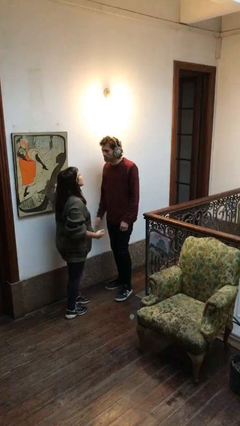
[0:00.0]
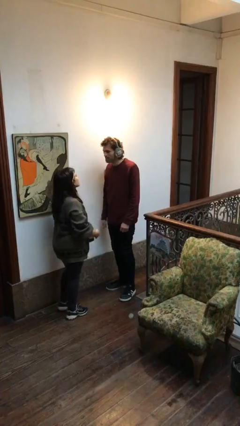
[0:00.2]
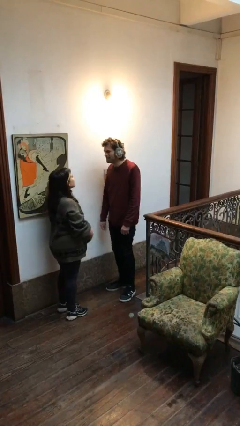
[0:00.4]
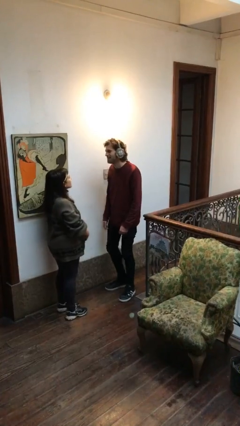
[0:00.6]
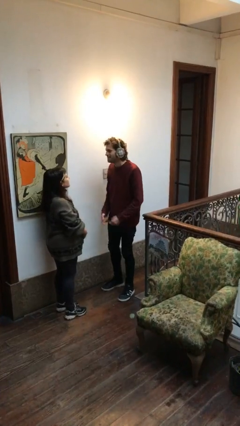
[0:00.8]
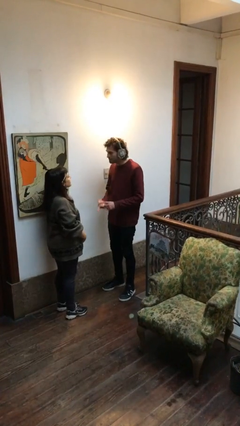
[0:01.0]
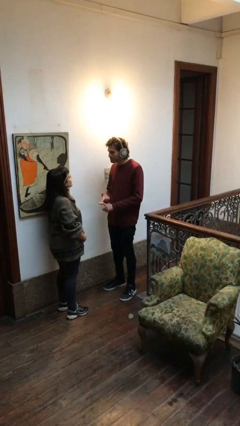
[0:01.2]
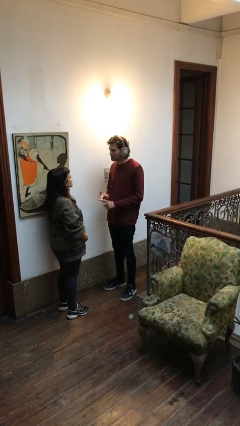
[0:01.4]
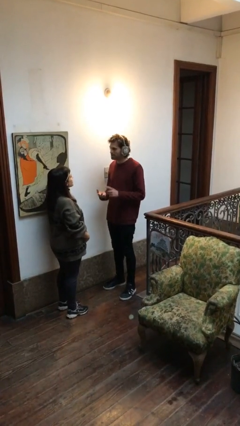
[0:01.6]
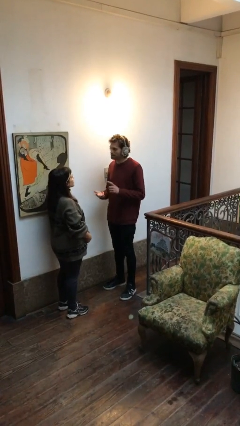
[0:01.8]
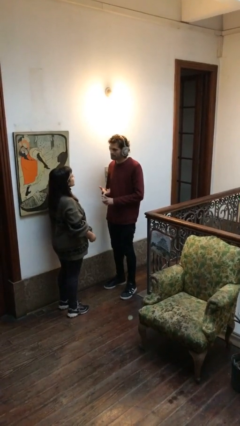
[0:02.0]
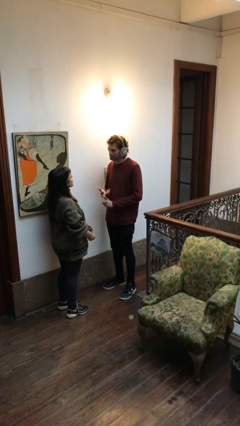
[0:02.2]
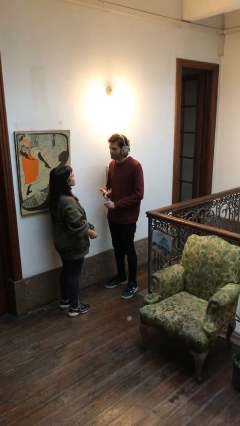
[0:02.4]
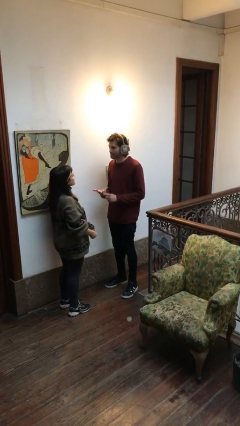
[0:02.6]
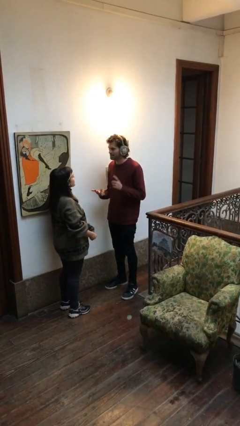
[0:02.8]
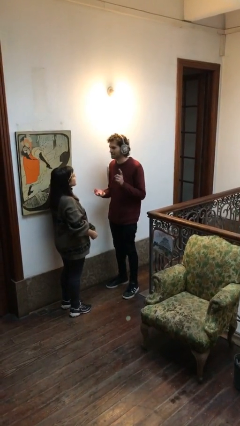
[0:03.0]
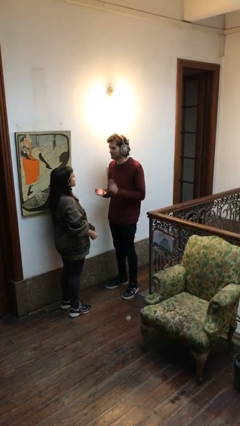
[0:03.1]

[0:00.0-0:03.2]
person talks to person

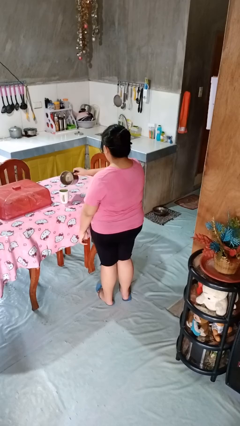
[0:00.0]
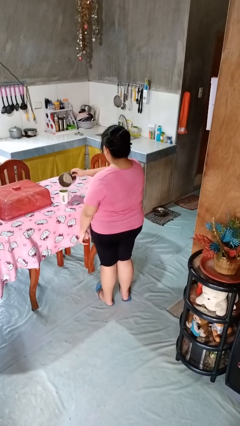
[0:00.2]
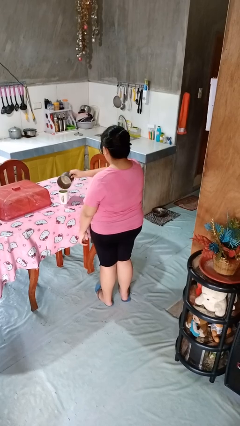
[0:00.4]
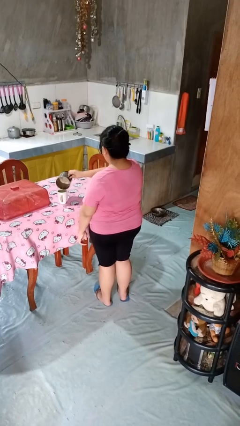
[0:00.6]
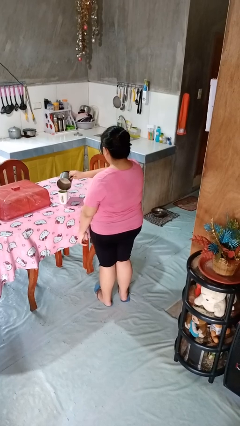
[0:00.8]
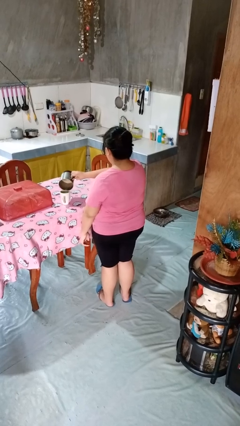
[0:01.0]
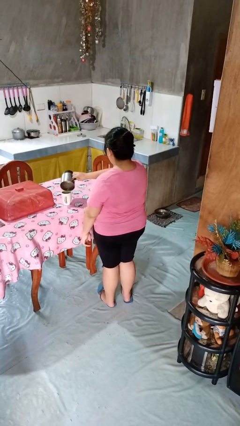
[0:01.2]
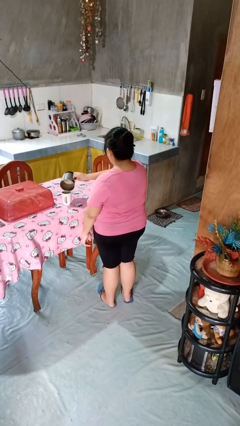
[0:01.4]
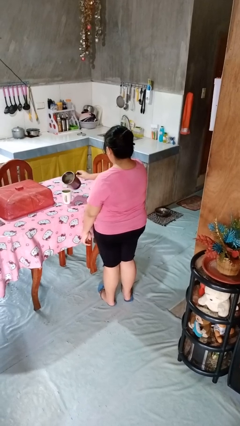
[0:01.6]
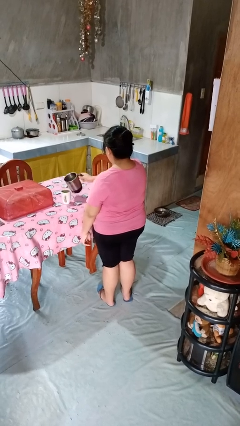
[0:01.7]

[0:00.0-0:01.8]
person pours coffee into mug

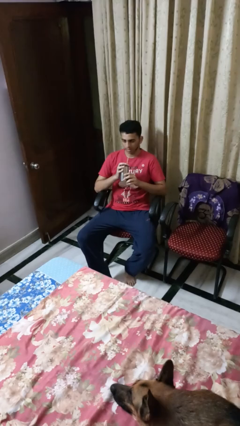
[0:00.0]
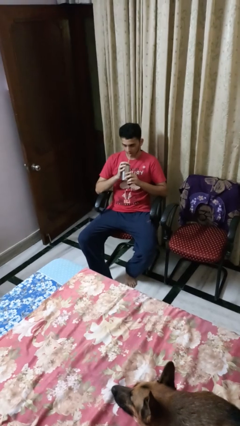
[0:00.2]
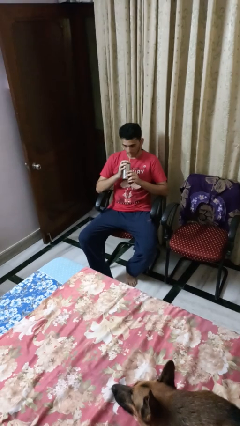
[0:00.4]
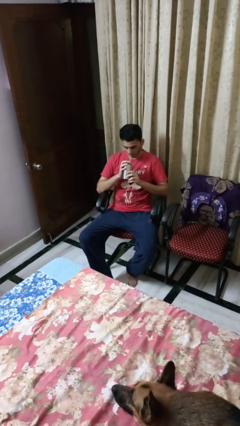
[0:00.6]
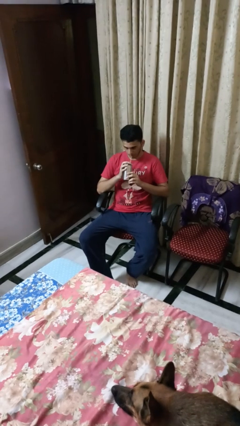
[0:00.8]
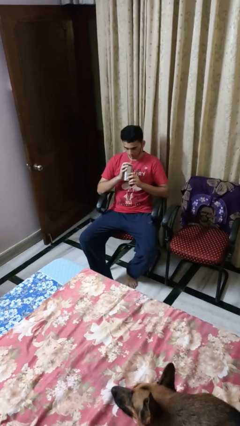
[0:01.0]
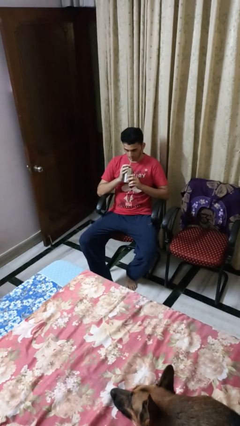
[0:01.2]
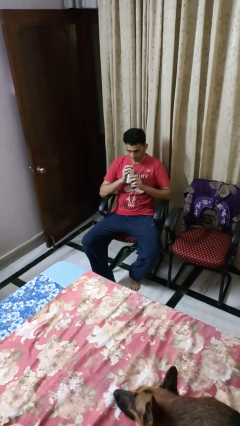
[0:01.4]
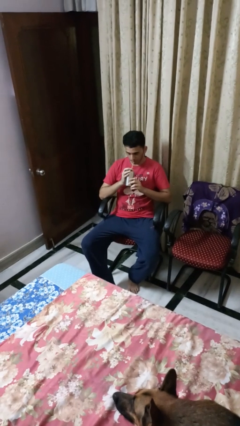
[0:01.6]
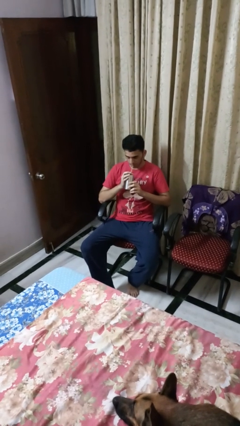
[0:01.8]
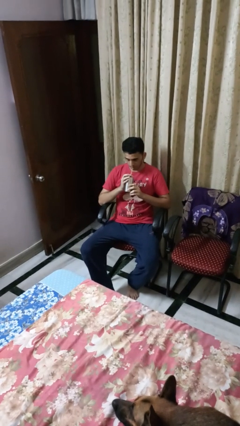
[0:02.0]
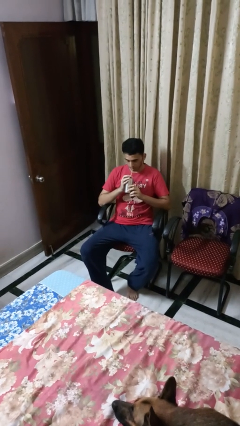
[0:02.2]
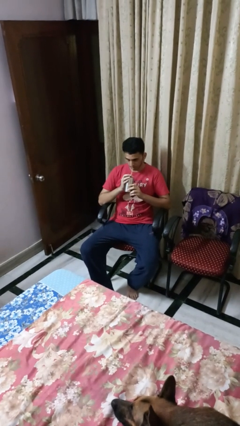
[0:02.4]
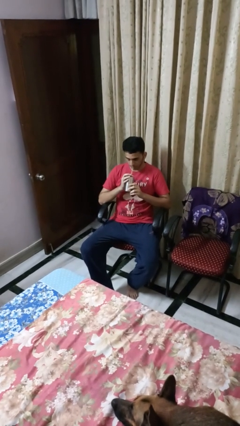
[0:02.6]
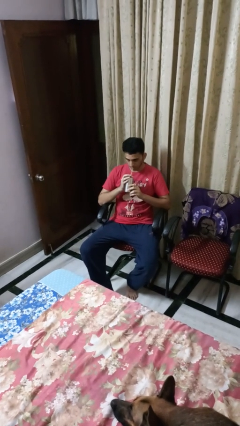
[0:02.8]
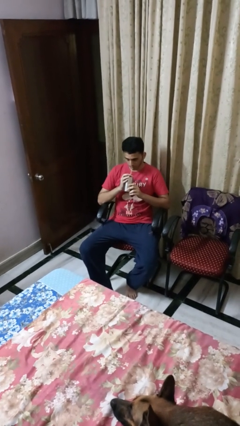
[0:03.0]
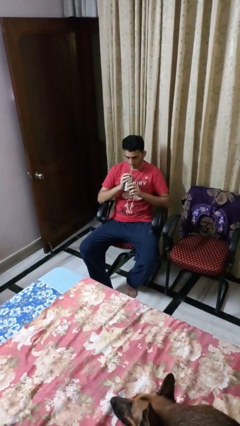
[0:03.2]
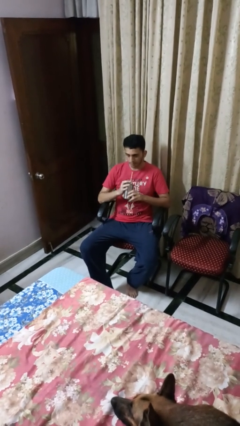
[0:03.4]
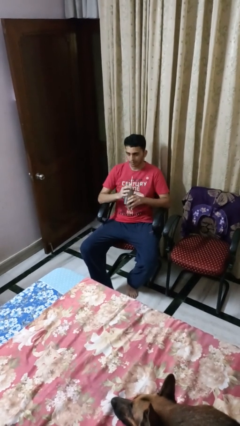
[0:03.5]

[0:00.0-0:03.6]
person drinks from straw

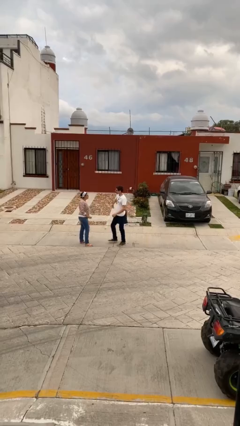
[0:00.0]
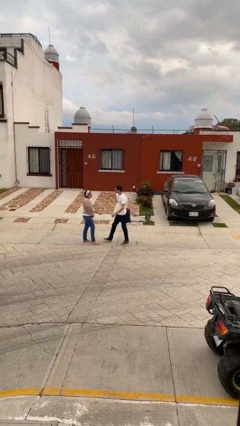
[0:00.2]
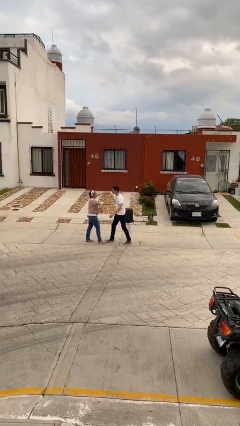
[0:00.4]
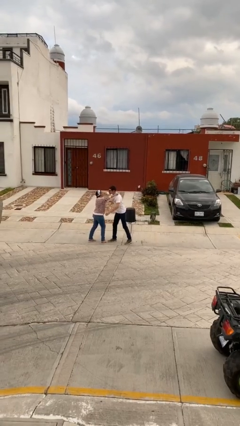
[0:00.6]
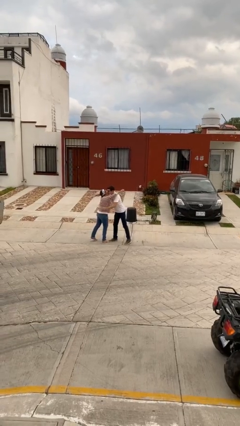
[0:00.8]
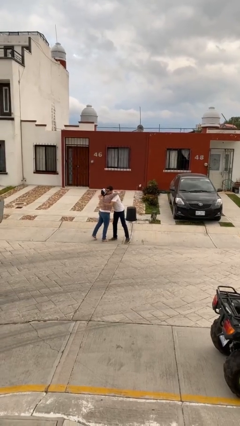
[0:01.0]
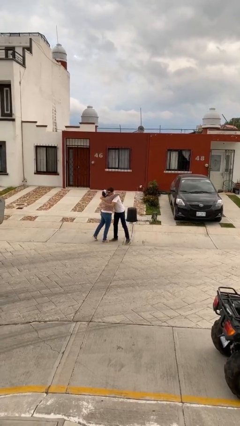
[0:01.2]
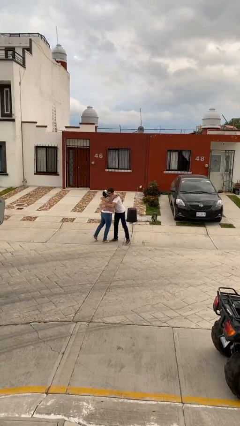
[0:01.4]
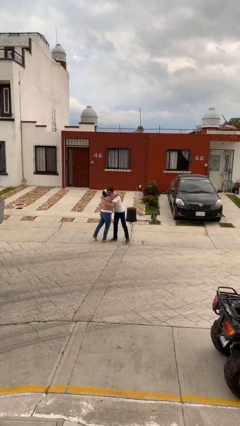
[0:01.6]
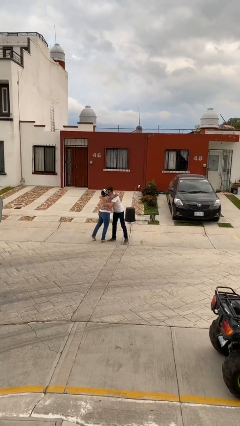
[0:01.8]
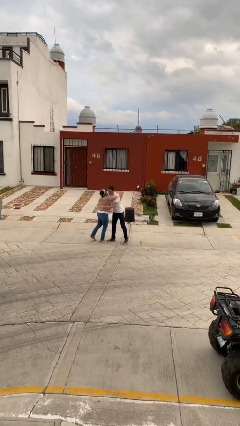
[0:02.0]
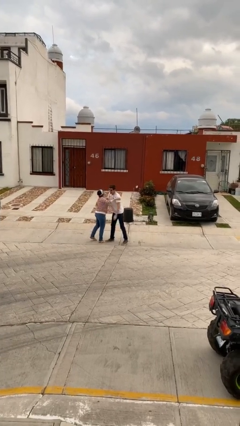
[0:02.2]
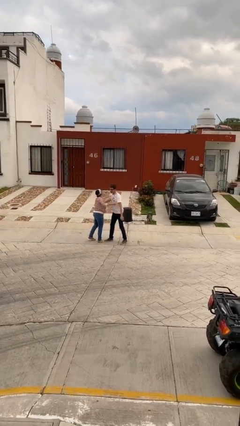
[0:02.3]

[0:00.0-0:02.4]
person embraces person

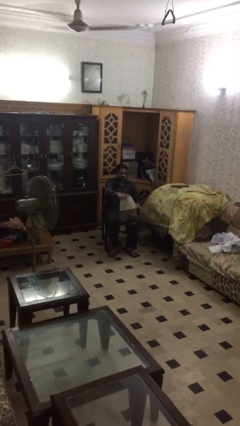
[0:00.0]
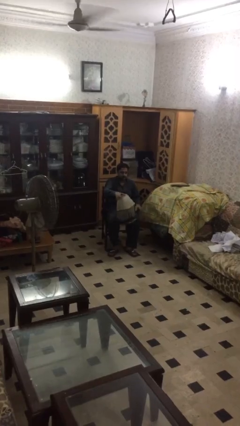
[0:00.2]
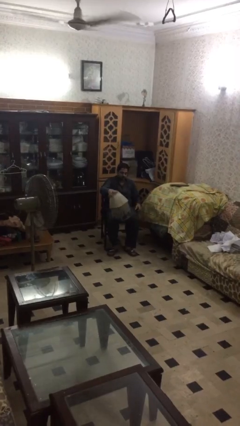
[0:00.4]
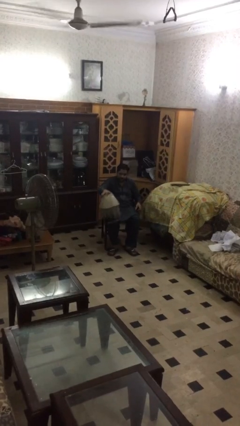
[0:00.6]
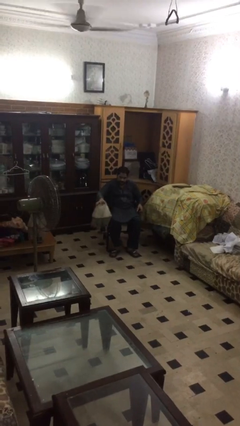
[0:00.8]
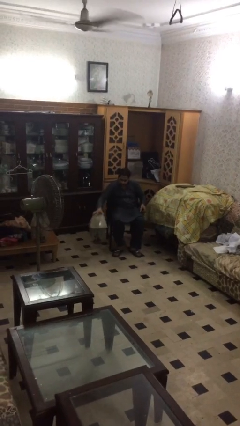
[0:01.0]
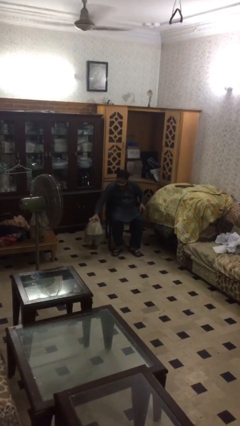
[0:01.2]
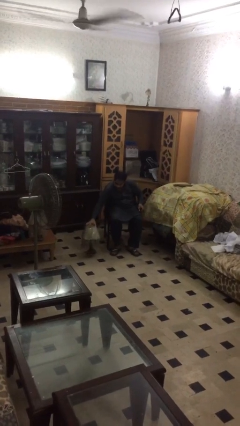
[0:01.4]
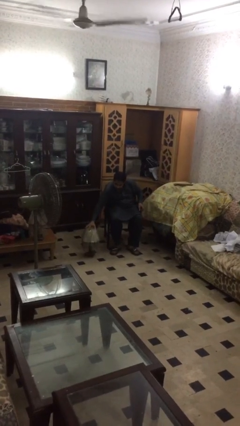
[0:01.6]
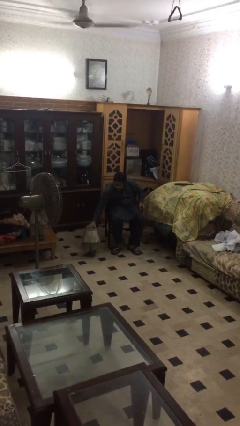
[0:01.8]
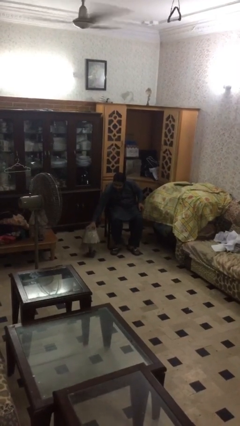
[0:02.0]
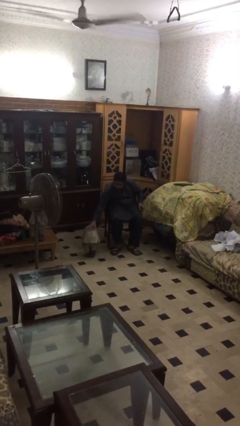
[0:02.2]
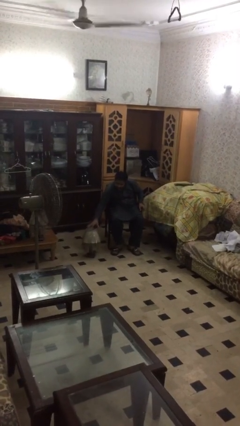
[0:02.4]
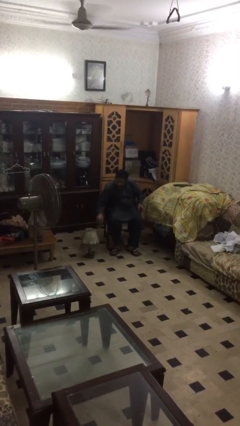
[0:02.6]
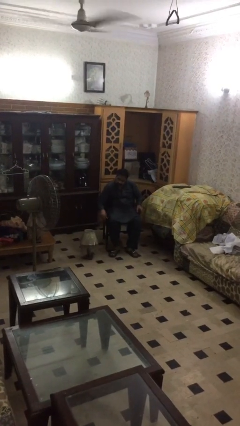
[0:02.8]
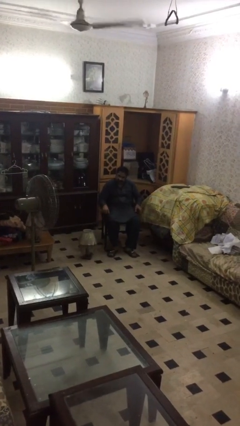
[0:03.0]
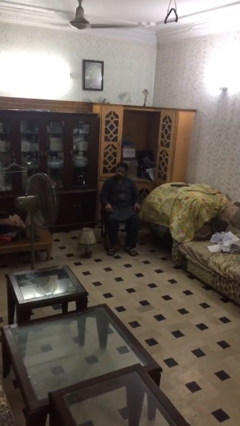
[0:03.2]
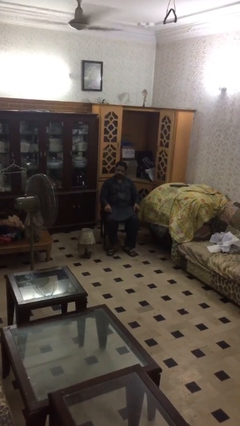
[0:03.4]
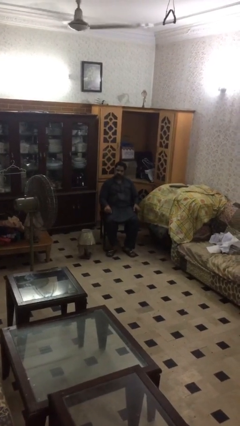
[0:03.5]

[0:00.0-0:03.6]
person puts down object on floor

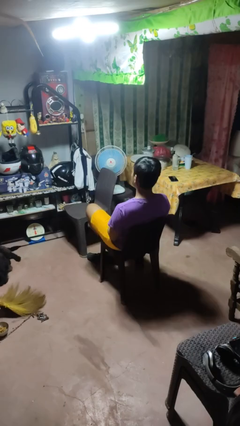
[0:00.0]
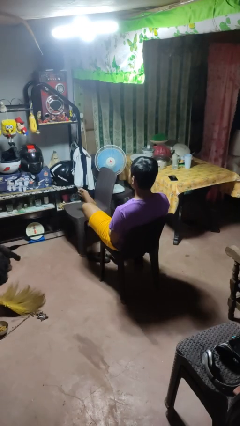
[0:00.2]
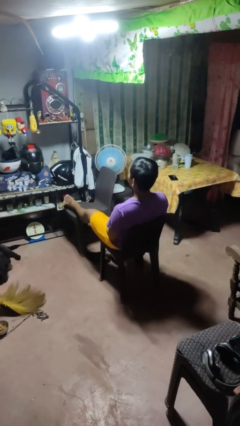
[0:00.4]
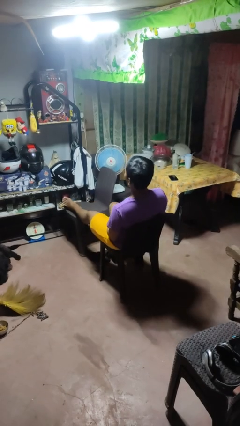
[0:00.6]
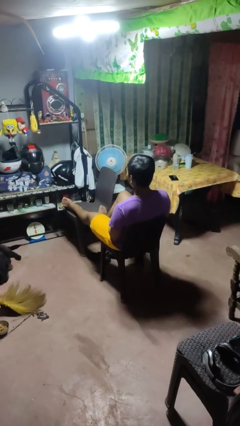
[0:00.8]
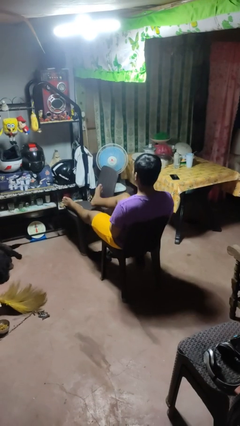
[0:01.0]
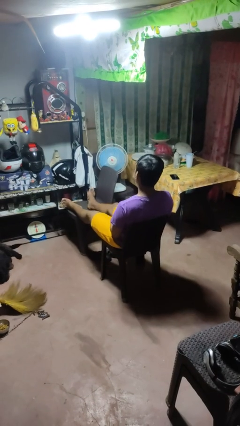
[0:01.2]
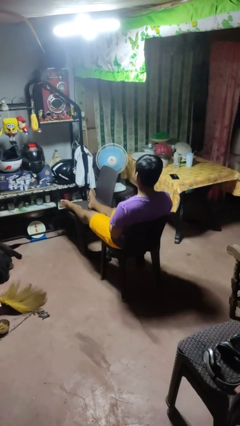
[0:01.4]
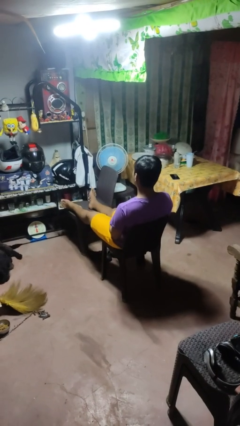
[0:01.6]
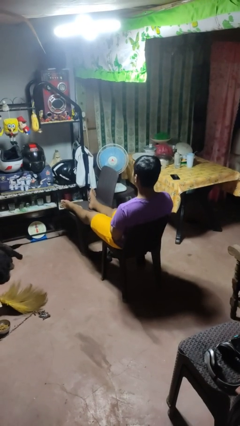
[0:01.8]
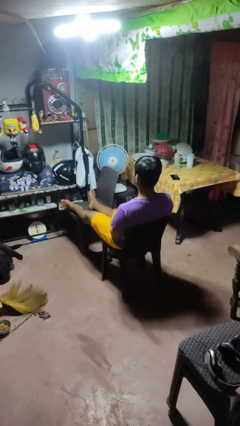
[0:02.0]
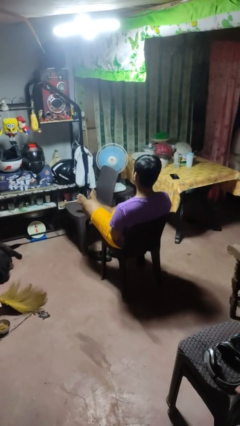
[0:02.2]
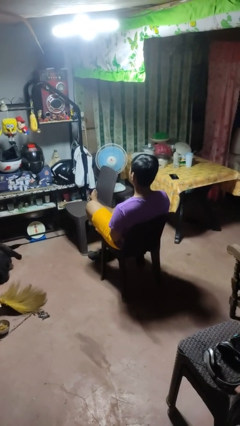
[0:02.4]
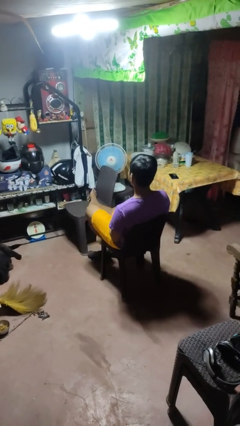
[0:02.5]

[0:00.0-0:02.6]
person puts feet up

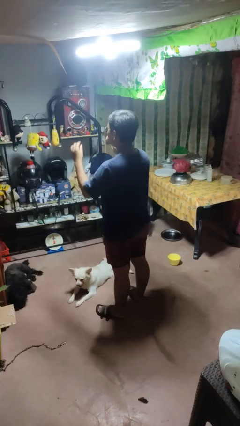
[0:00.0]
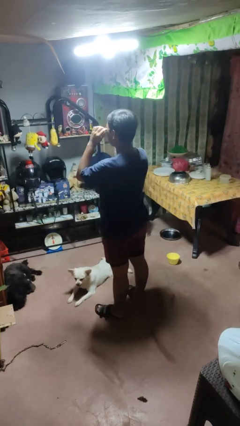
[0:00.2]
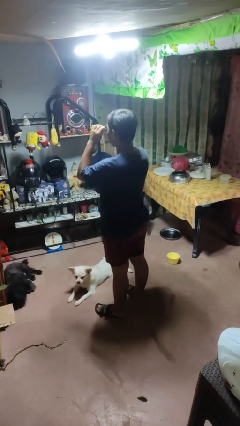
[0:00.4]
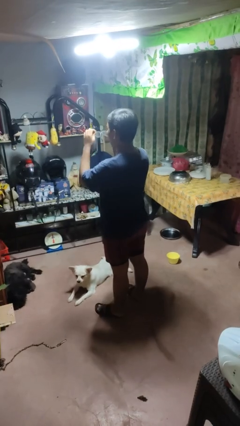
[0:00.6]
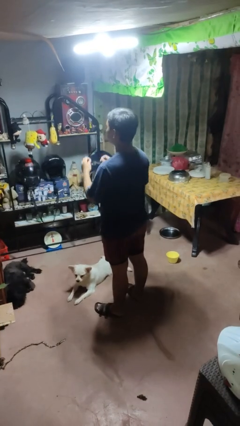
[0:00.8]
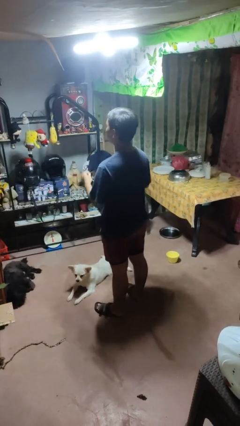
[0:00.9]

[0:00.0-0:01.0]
person takes off sunglasses
